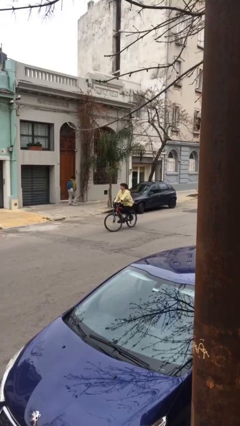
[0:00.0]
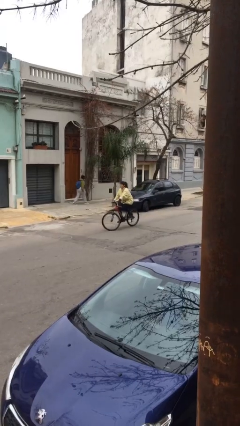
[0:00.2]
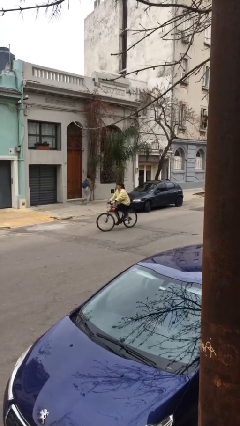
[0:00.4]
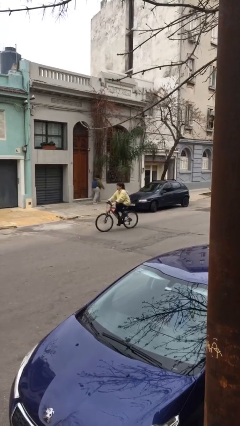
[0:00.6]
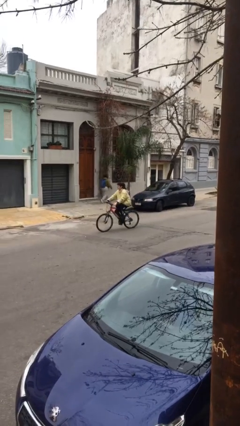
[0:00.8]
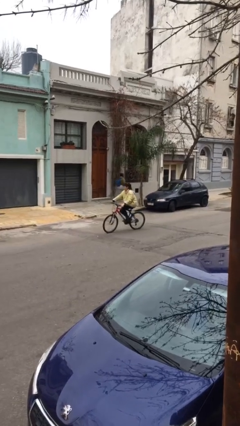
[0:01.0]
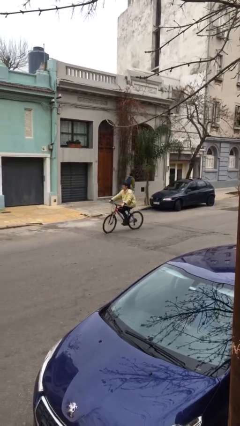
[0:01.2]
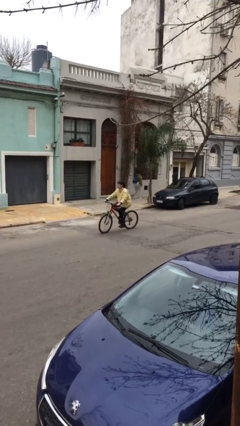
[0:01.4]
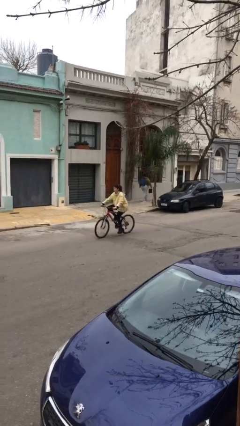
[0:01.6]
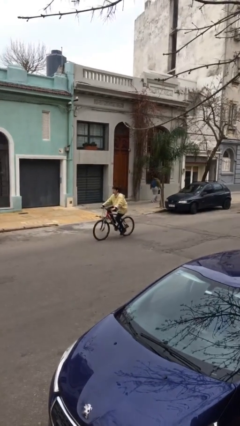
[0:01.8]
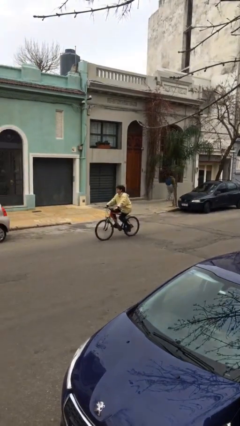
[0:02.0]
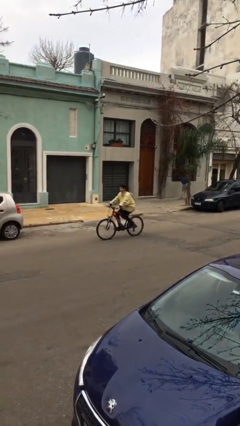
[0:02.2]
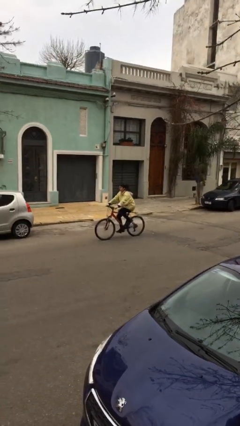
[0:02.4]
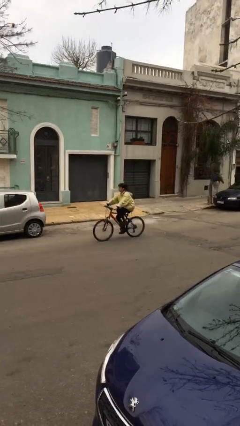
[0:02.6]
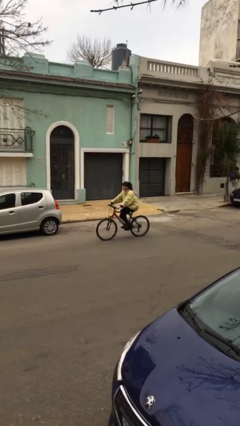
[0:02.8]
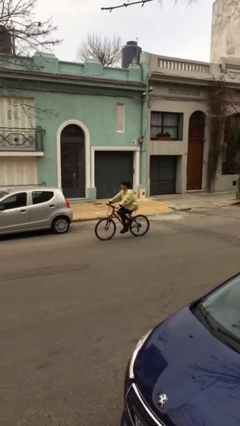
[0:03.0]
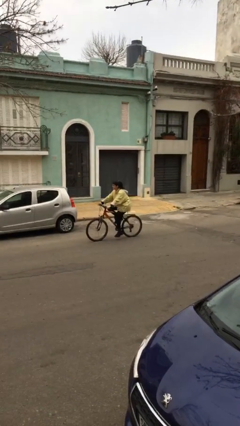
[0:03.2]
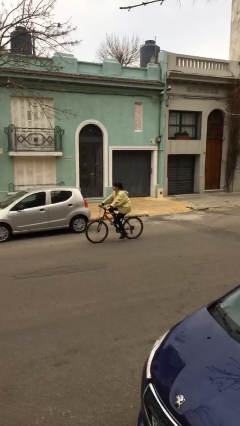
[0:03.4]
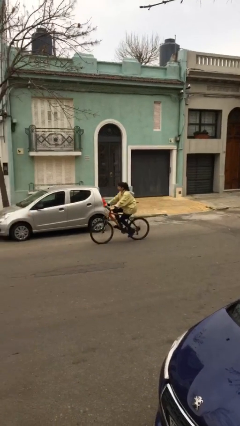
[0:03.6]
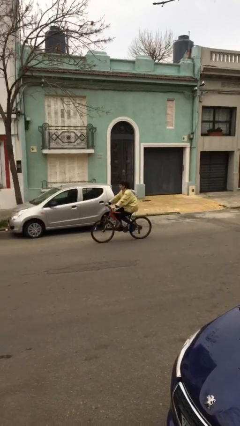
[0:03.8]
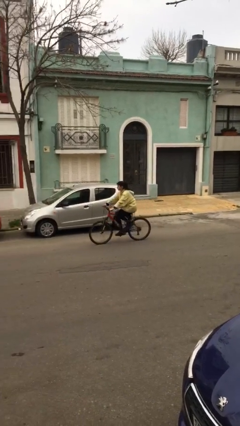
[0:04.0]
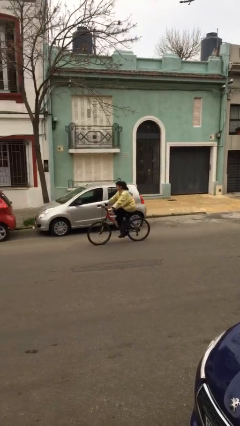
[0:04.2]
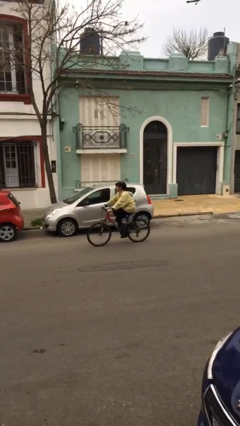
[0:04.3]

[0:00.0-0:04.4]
person rides bicycle

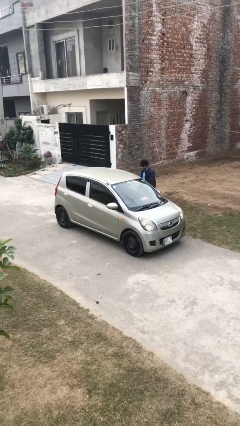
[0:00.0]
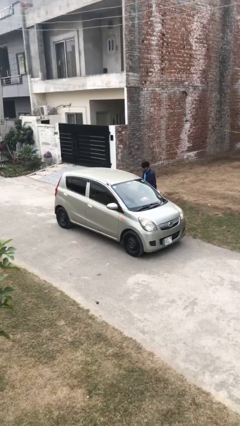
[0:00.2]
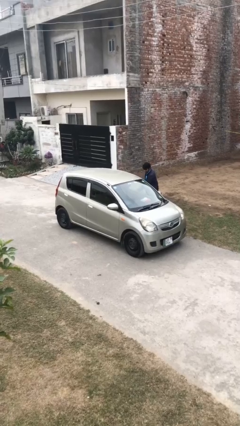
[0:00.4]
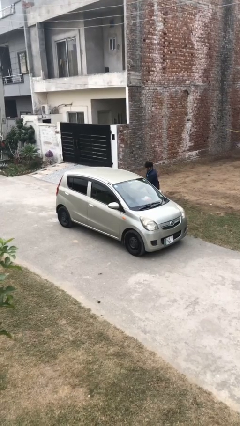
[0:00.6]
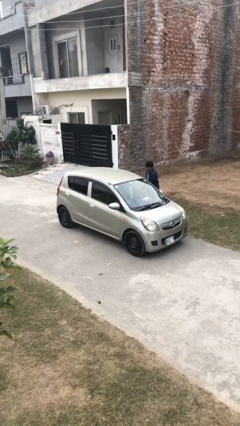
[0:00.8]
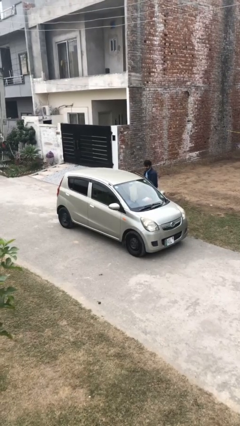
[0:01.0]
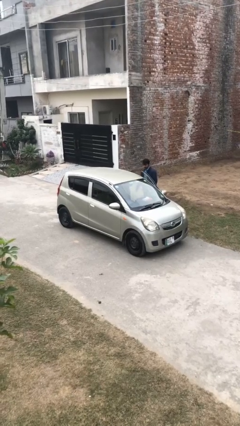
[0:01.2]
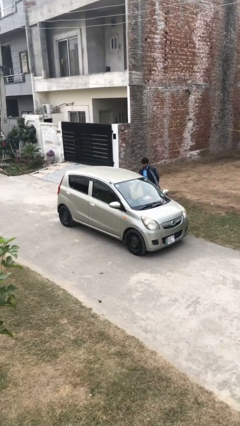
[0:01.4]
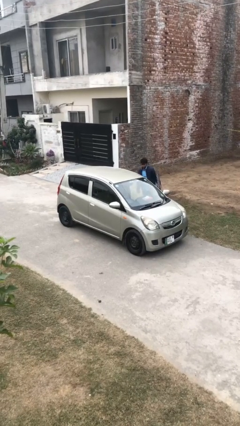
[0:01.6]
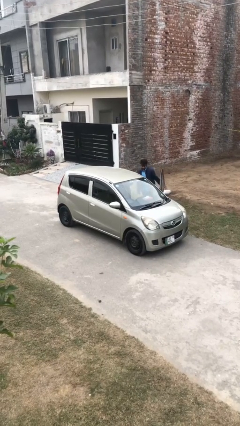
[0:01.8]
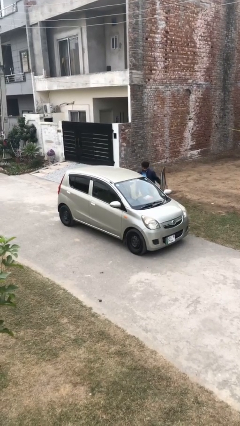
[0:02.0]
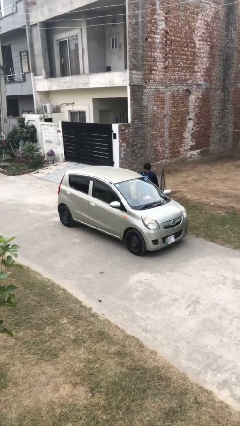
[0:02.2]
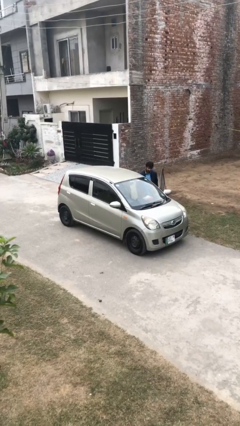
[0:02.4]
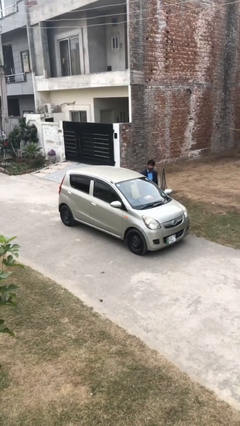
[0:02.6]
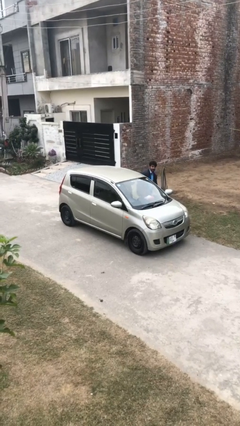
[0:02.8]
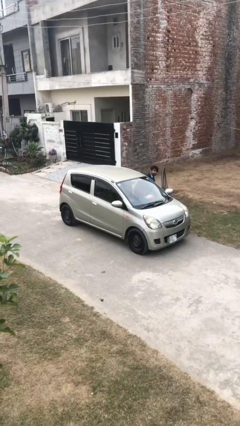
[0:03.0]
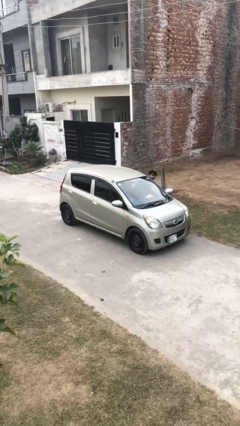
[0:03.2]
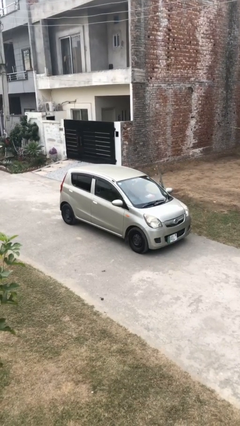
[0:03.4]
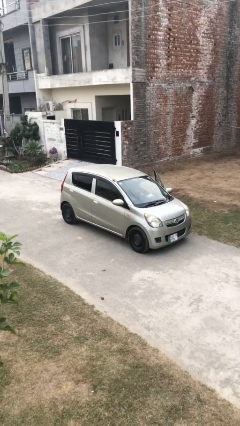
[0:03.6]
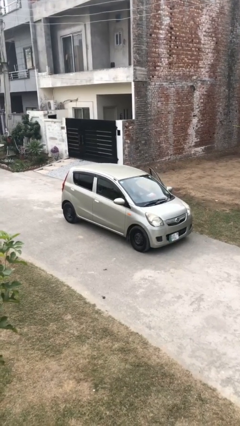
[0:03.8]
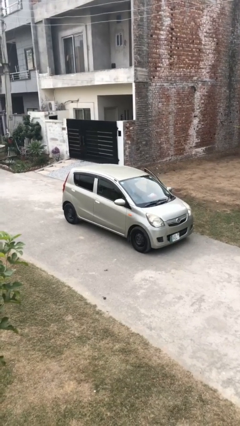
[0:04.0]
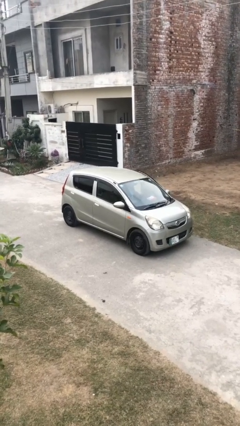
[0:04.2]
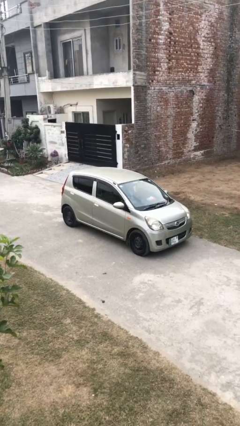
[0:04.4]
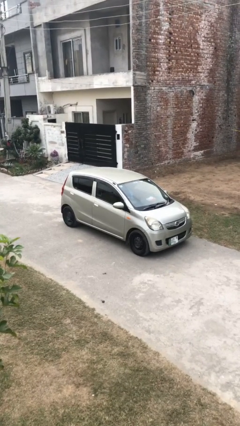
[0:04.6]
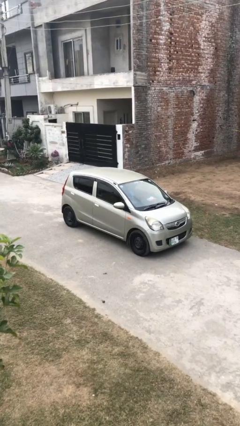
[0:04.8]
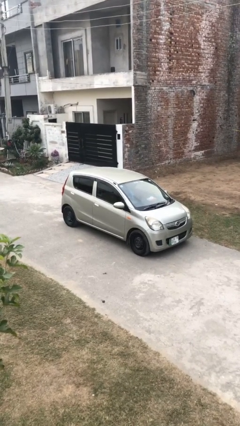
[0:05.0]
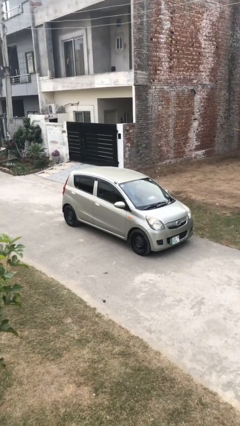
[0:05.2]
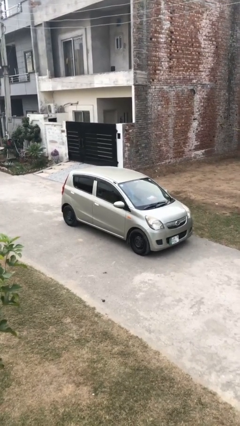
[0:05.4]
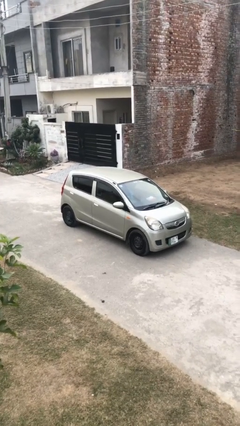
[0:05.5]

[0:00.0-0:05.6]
car picks up person

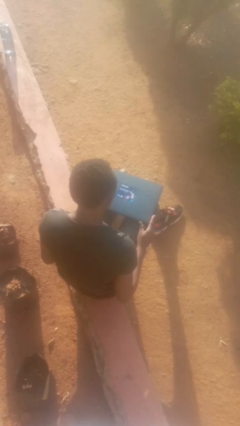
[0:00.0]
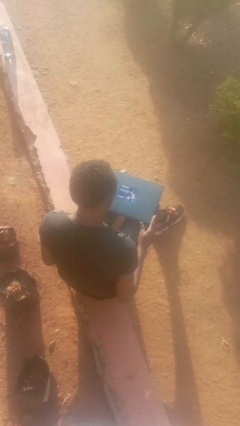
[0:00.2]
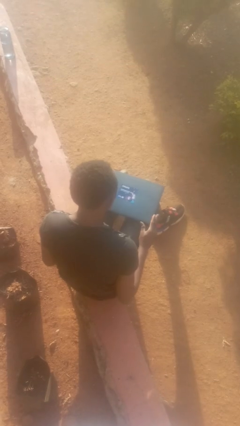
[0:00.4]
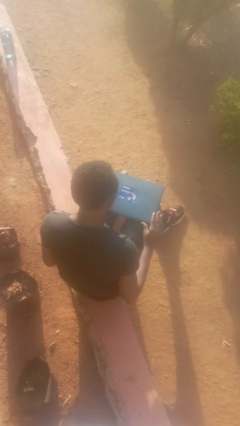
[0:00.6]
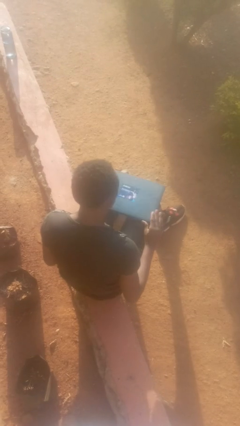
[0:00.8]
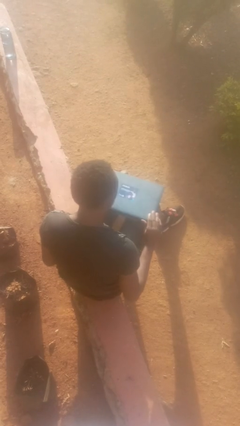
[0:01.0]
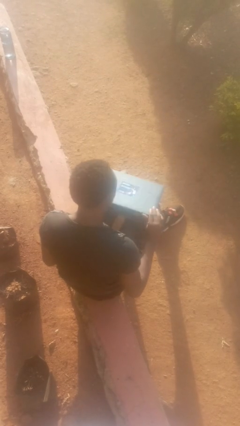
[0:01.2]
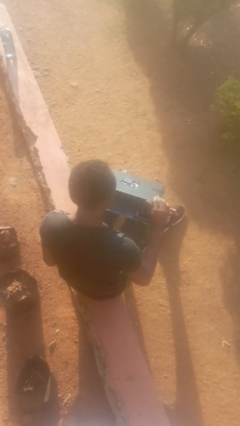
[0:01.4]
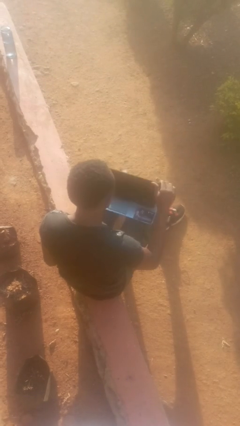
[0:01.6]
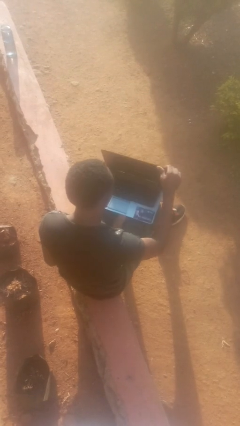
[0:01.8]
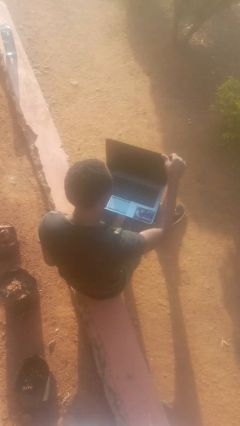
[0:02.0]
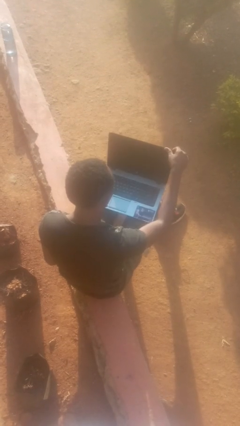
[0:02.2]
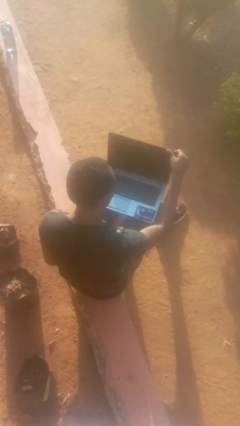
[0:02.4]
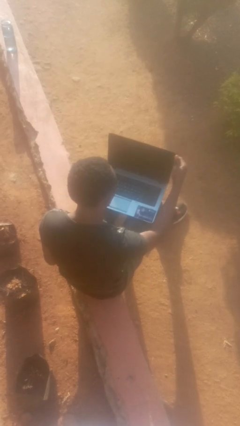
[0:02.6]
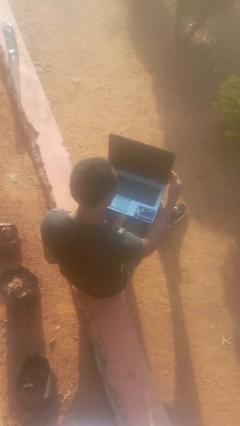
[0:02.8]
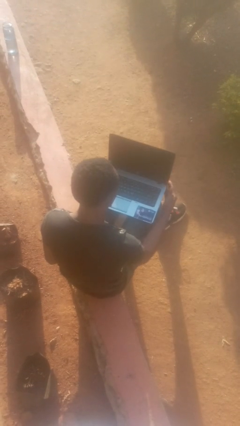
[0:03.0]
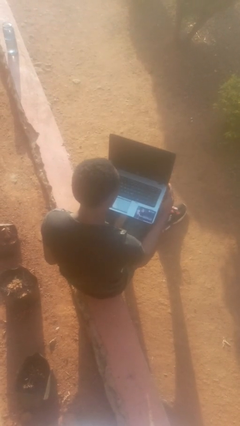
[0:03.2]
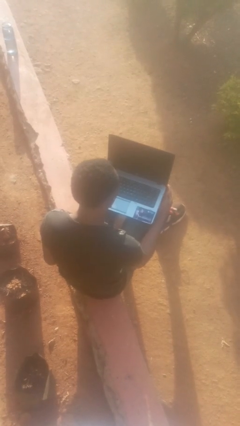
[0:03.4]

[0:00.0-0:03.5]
person opens laptop

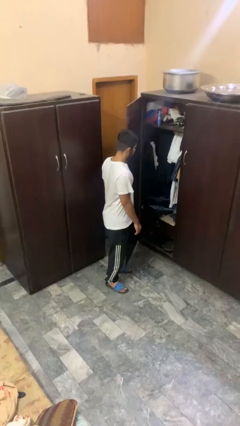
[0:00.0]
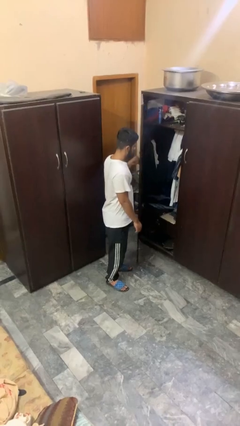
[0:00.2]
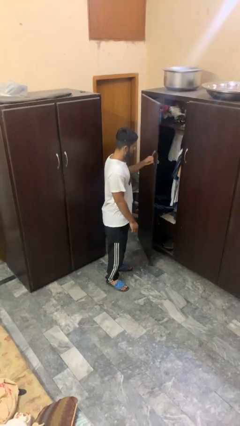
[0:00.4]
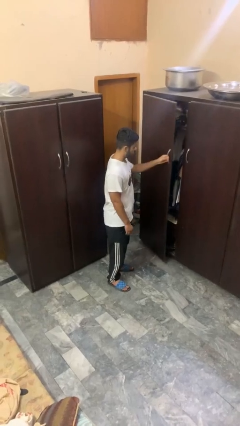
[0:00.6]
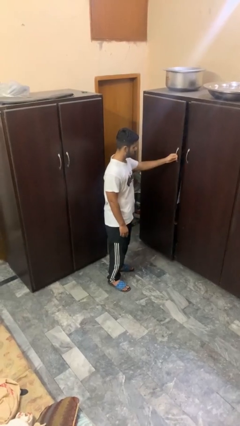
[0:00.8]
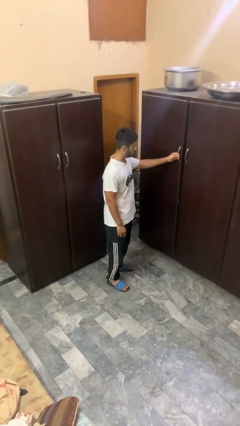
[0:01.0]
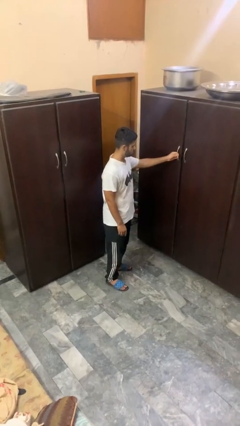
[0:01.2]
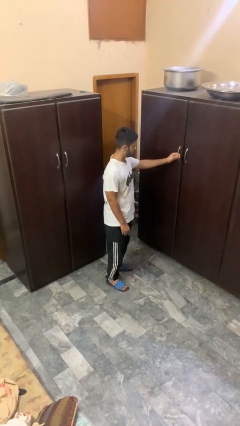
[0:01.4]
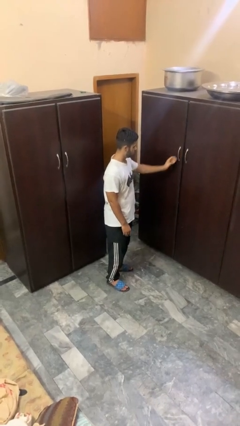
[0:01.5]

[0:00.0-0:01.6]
person closes closet door

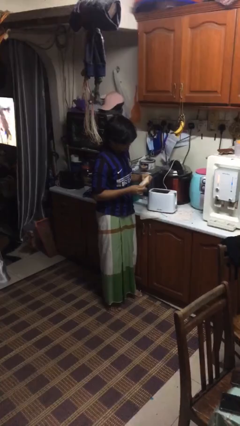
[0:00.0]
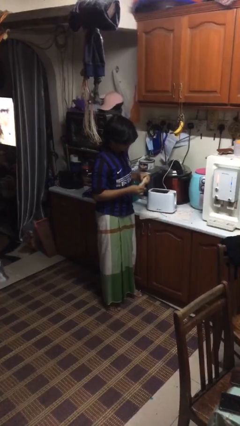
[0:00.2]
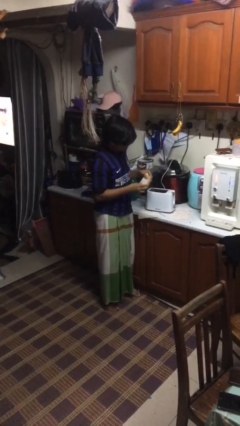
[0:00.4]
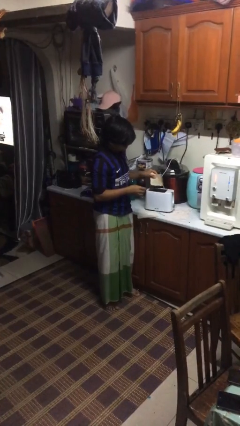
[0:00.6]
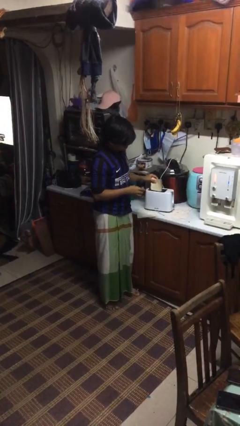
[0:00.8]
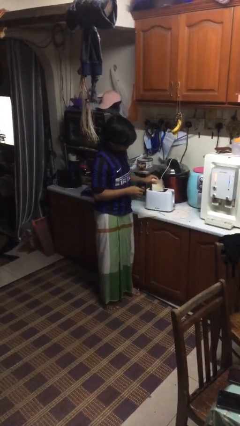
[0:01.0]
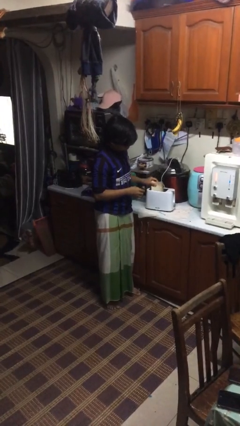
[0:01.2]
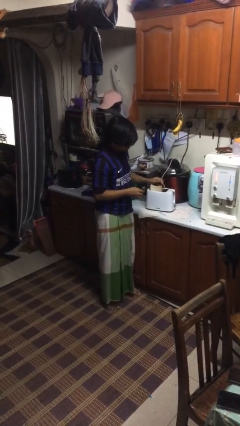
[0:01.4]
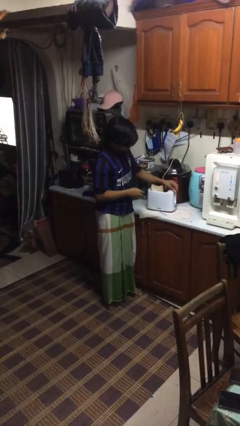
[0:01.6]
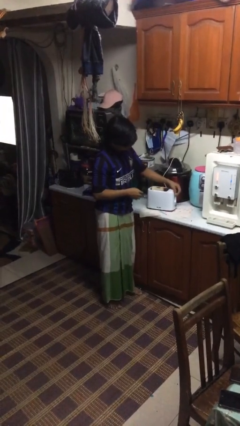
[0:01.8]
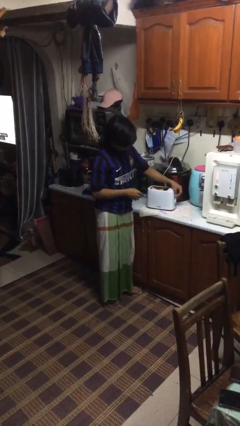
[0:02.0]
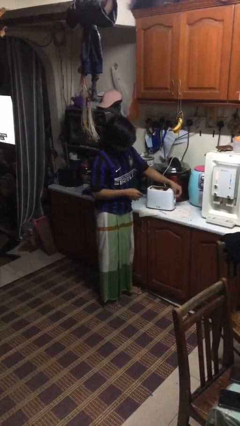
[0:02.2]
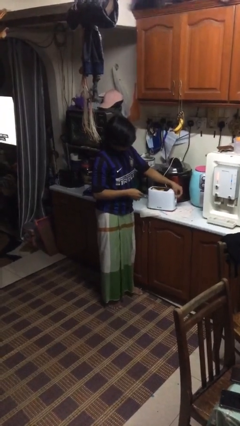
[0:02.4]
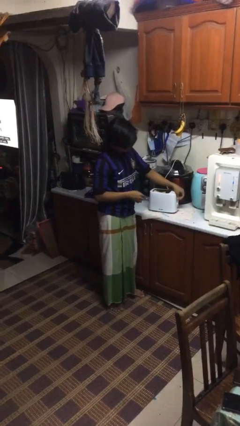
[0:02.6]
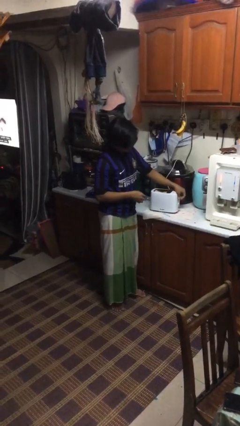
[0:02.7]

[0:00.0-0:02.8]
person puts object into toaster
